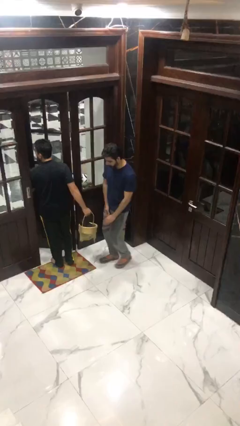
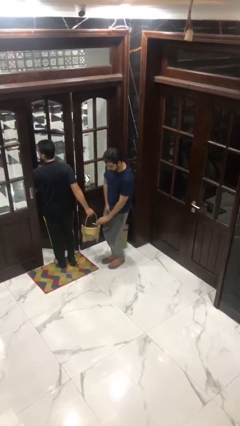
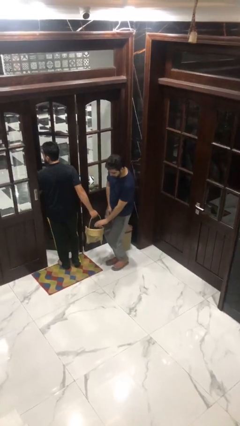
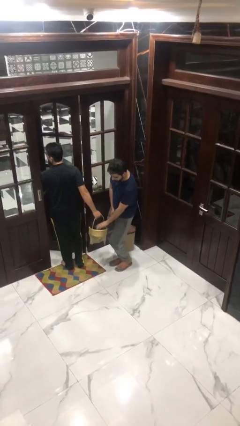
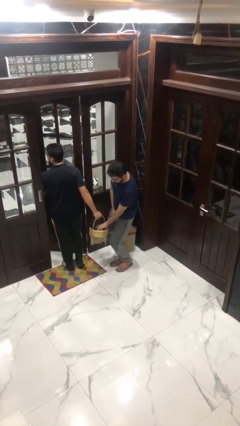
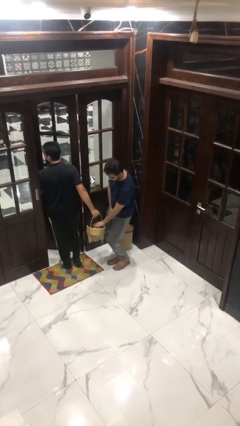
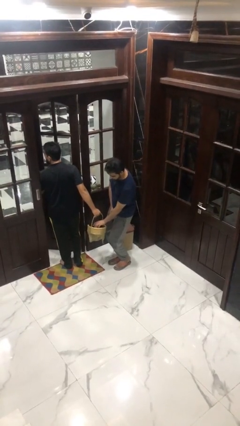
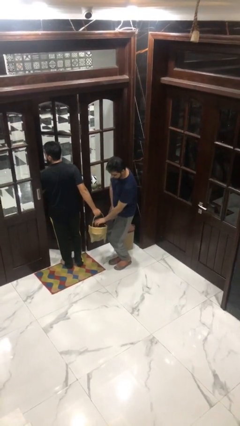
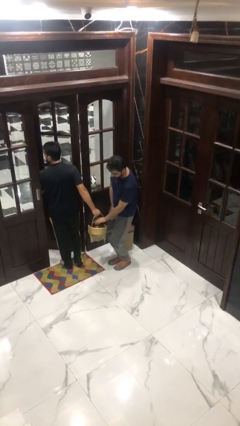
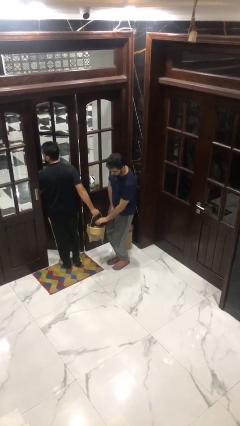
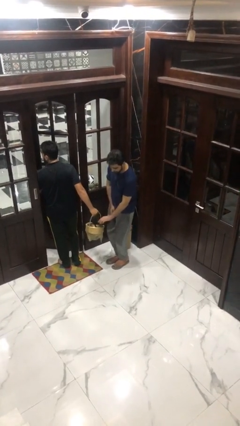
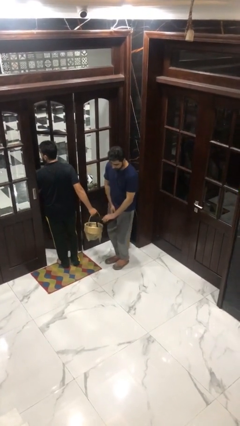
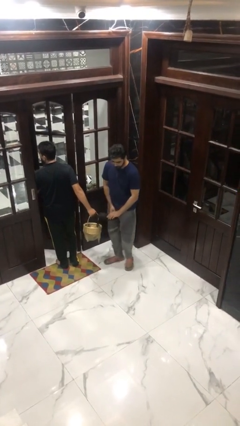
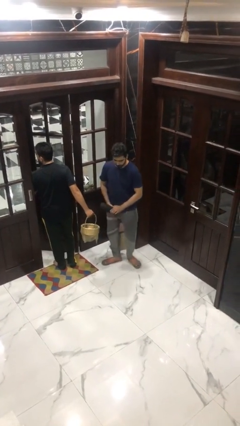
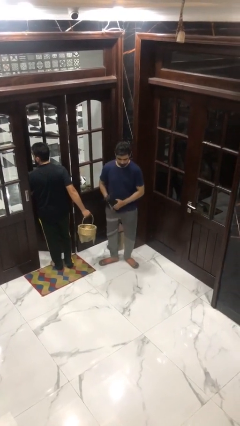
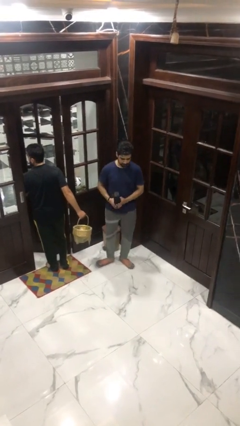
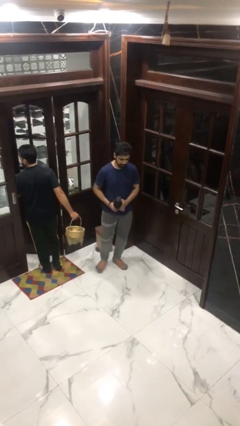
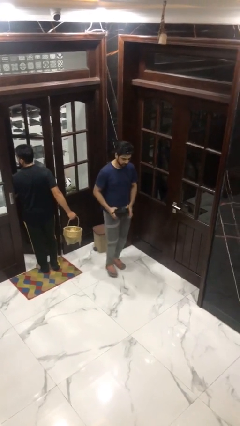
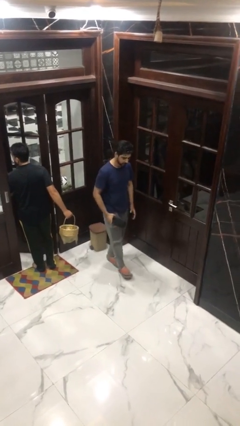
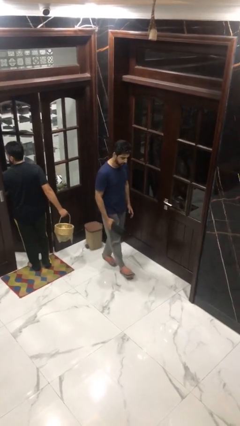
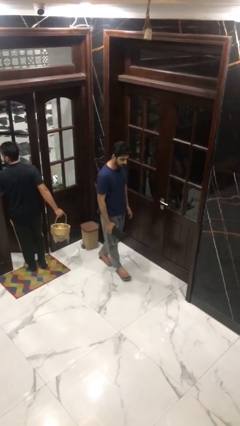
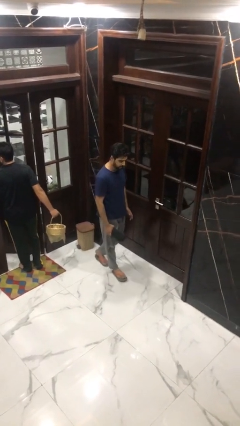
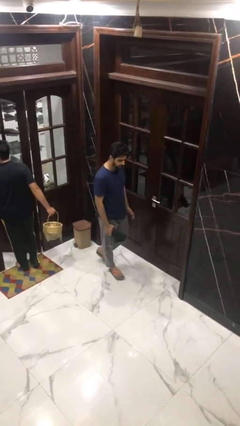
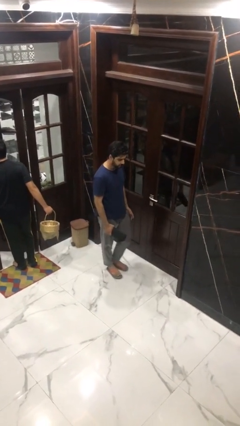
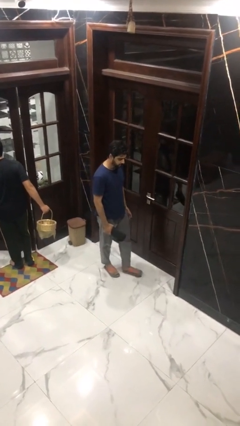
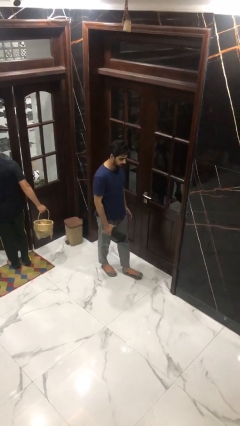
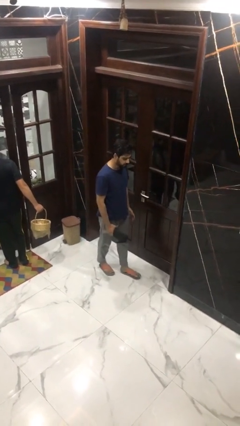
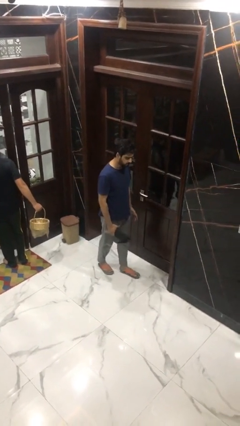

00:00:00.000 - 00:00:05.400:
person steals object from person

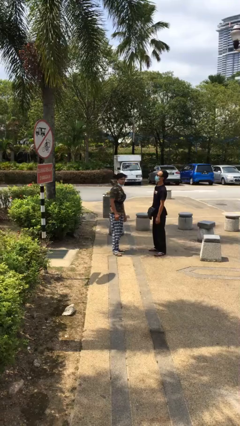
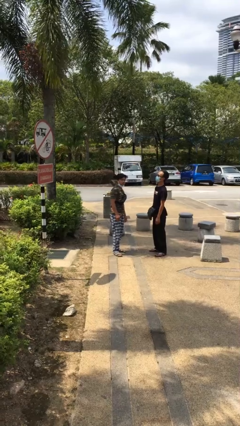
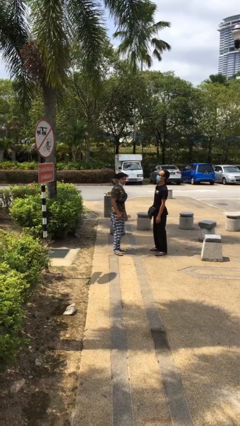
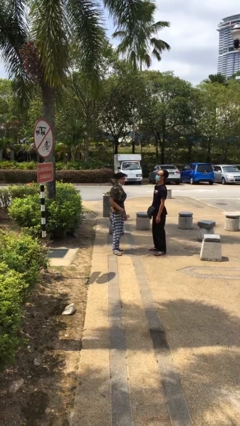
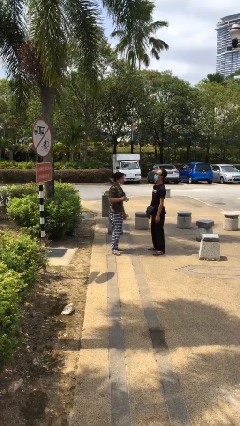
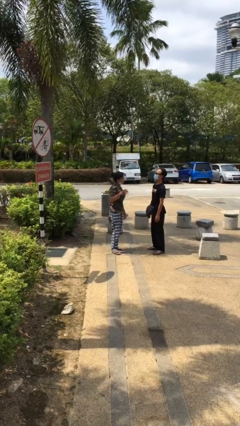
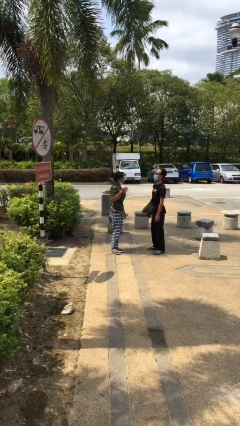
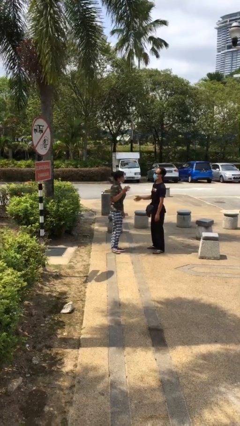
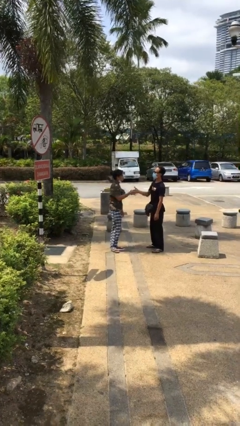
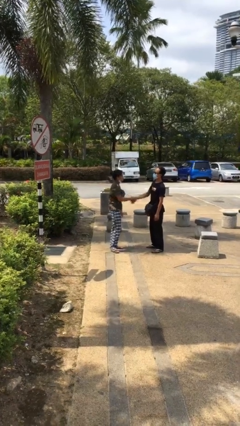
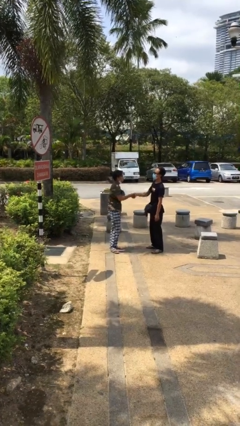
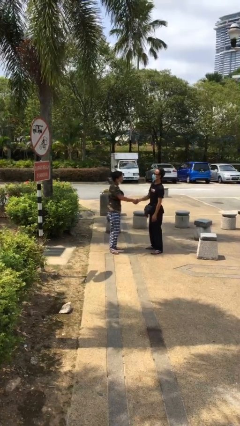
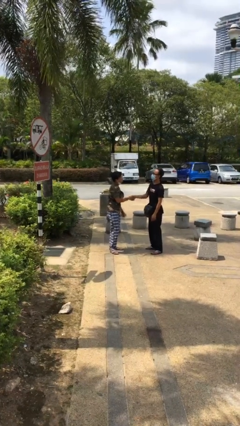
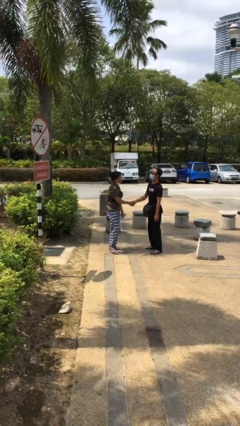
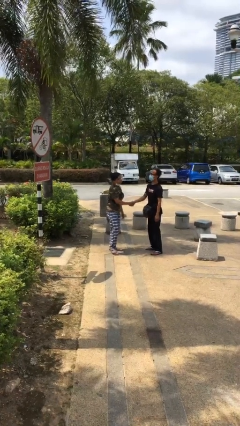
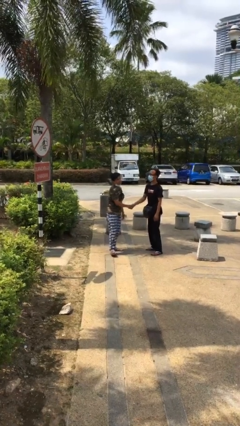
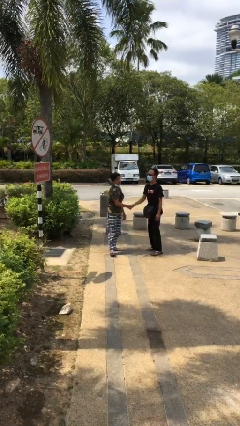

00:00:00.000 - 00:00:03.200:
person shakes hand

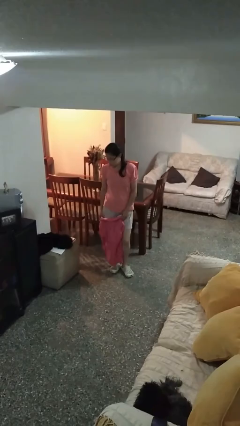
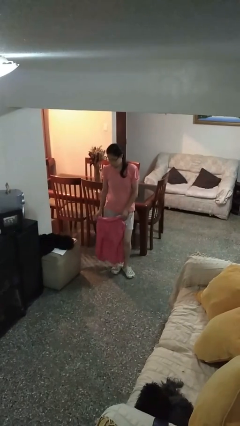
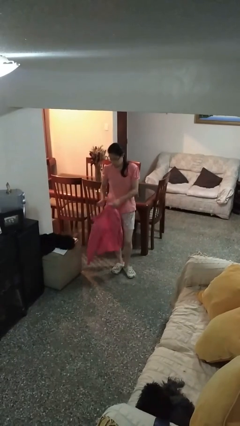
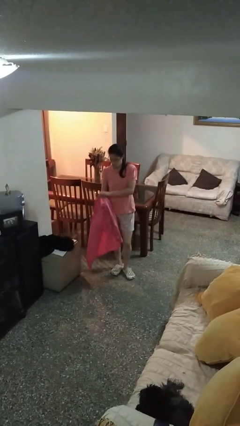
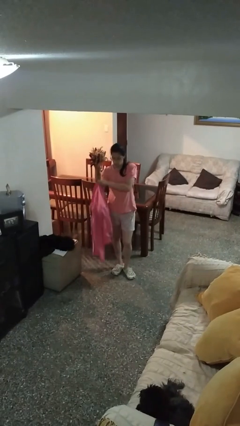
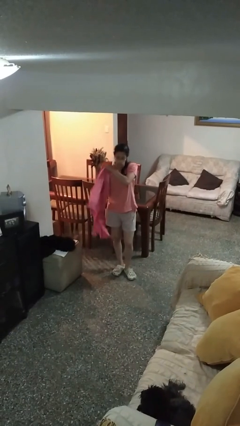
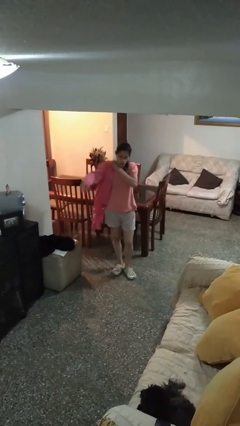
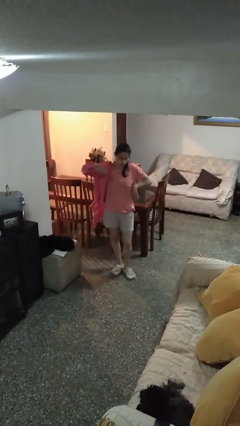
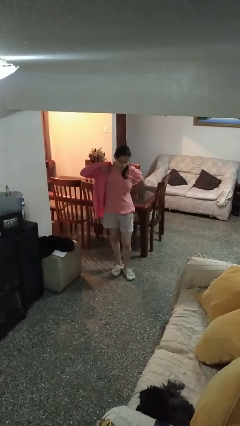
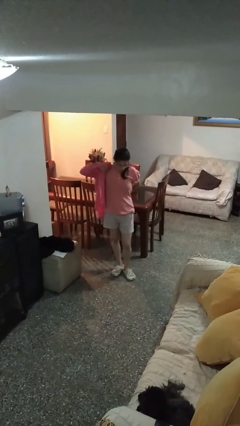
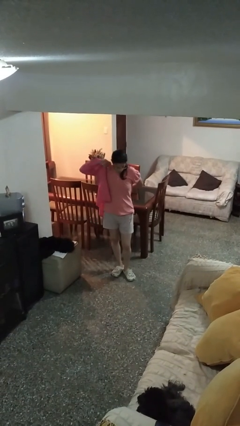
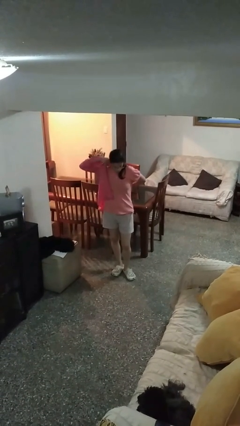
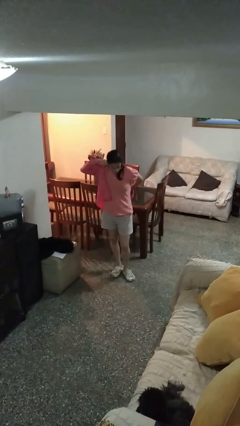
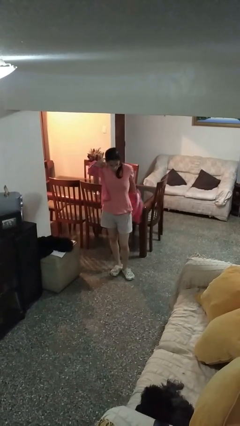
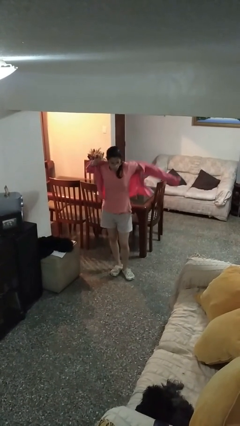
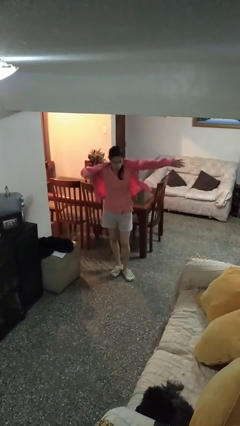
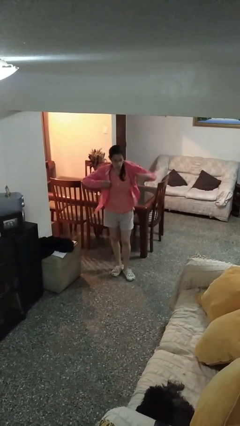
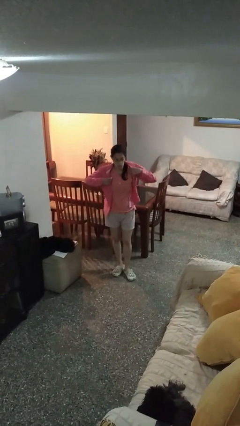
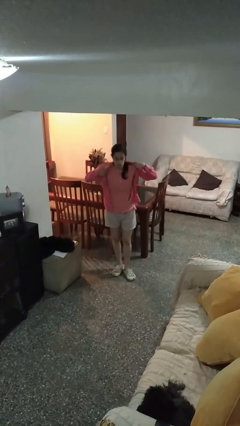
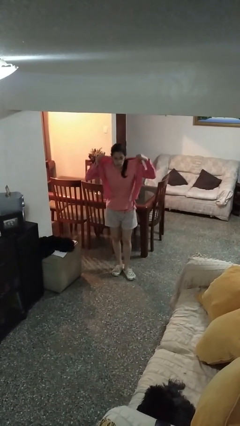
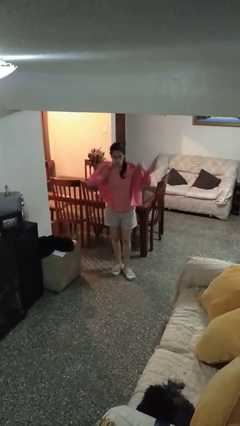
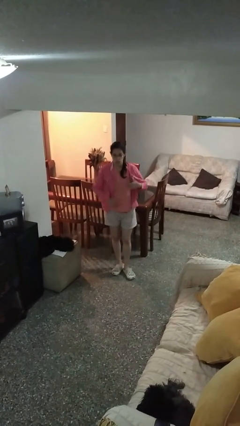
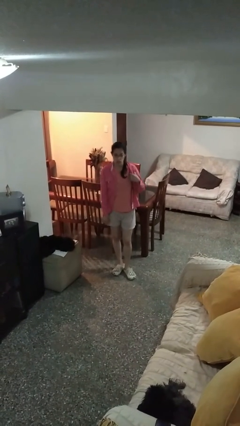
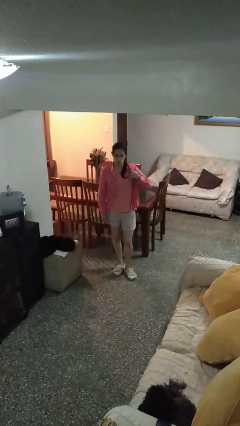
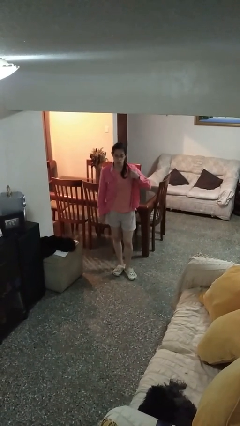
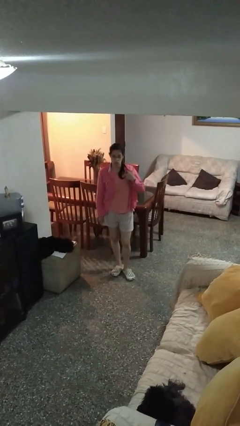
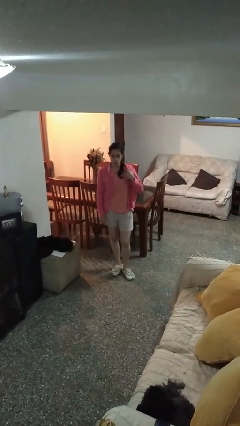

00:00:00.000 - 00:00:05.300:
person puts on shirt

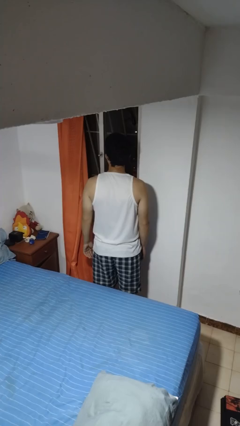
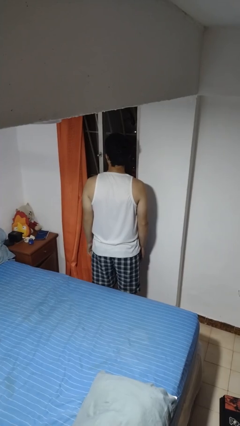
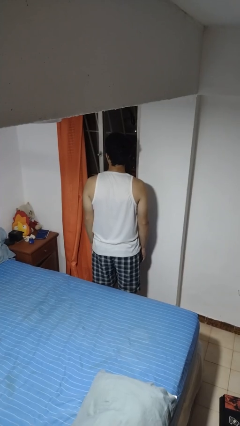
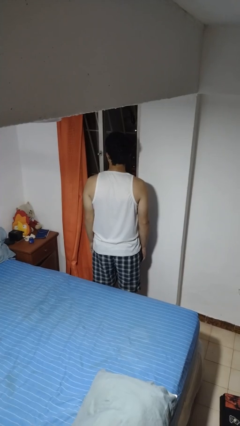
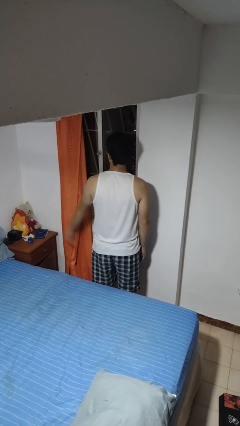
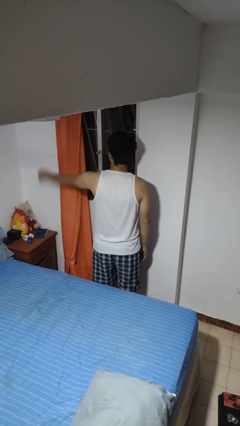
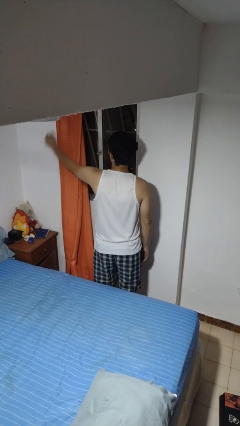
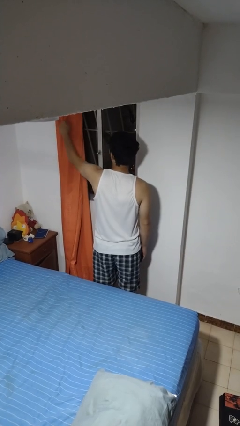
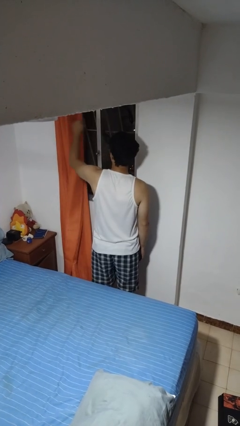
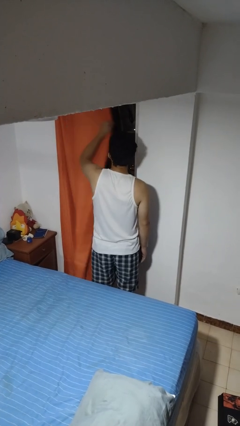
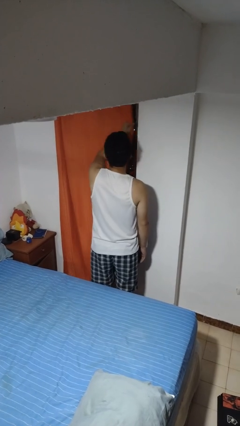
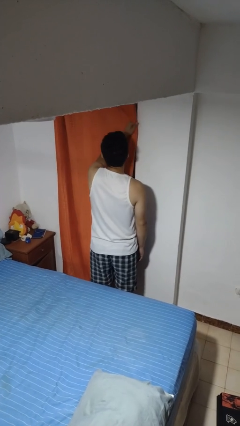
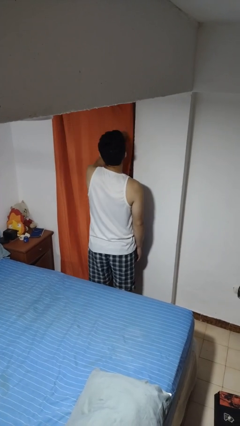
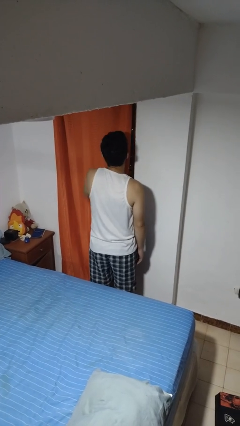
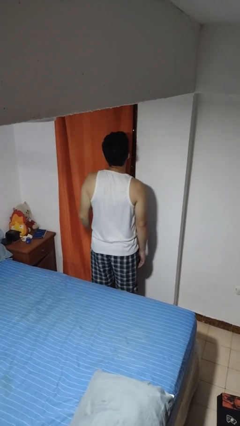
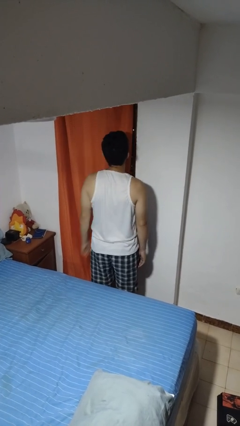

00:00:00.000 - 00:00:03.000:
person closes curtains

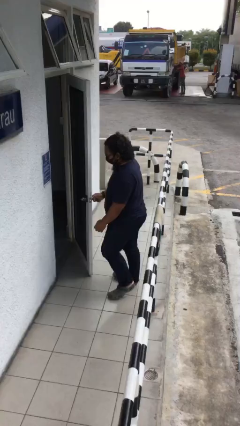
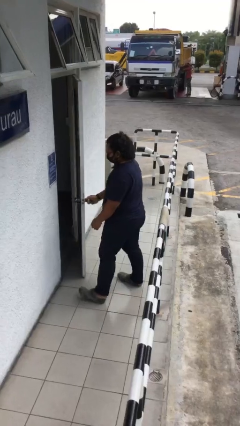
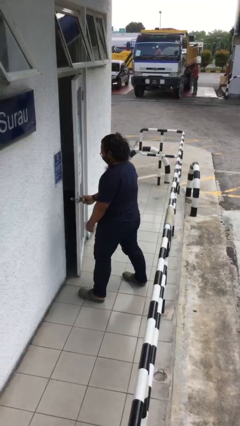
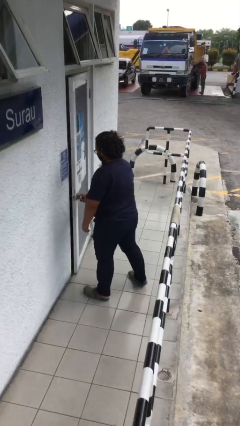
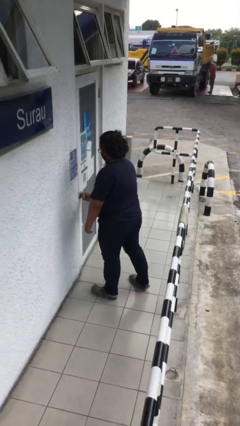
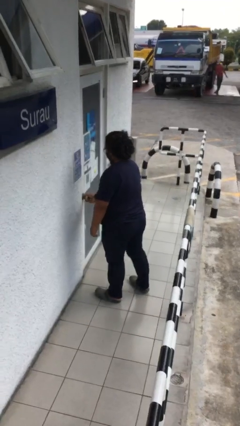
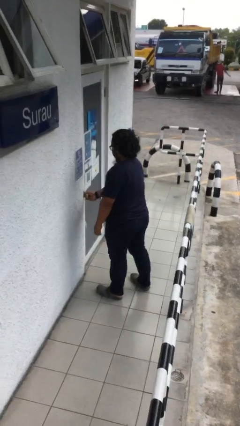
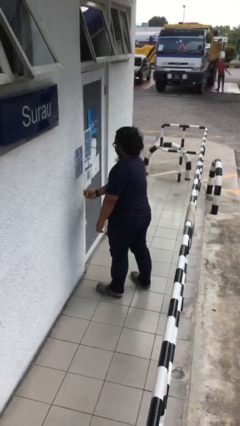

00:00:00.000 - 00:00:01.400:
person closes facility door
